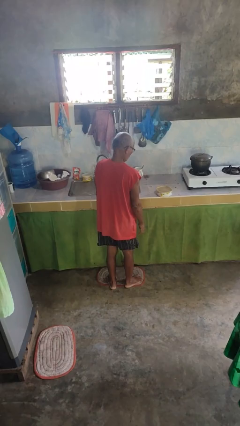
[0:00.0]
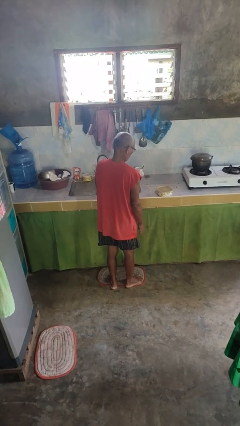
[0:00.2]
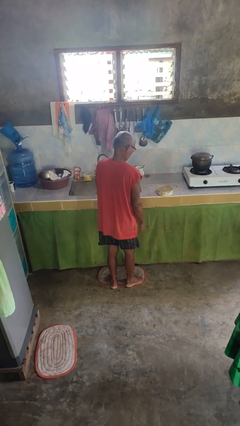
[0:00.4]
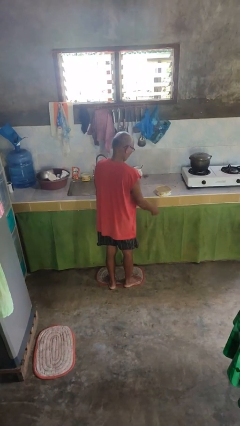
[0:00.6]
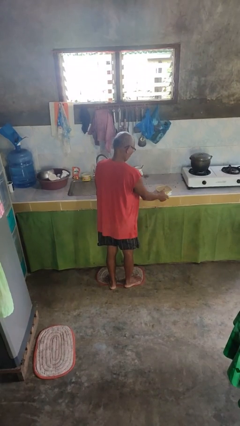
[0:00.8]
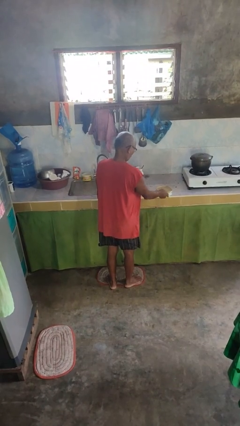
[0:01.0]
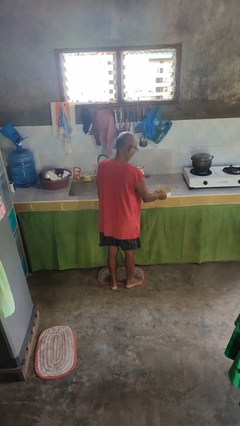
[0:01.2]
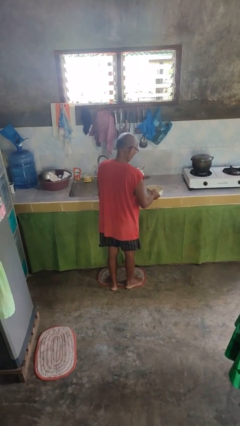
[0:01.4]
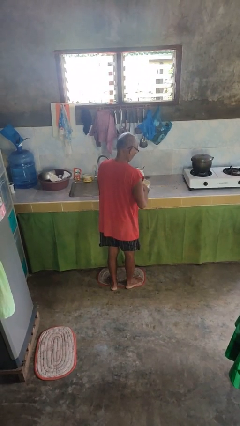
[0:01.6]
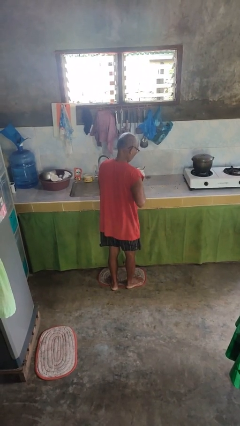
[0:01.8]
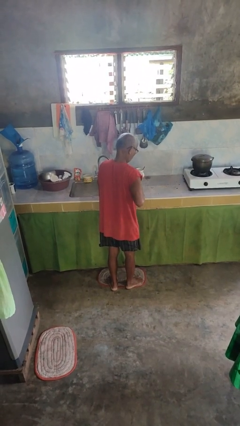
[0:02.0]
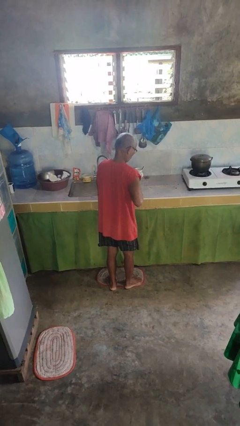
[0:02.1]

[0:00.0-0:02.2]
person picks up object from countertop

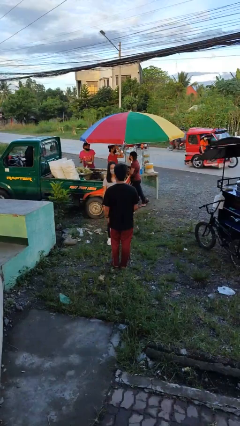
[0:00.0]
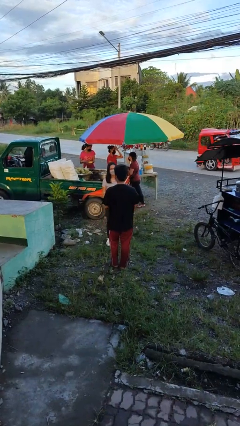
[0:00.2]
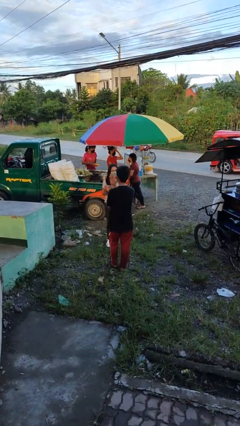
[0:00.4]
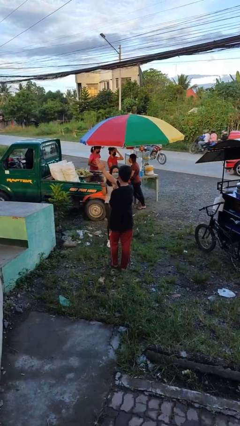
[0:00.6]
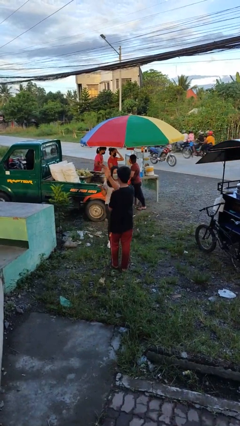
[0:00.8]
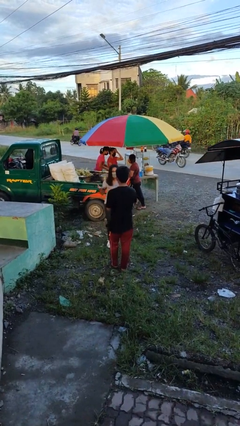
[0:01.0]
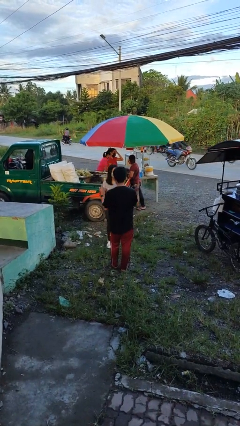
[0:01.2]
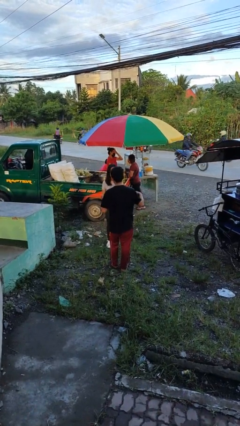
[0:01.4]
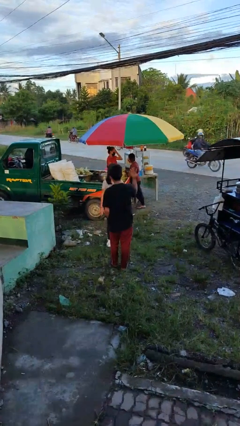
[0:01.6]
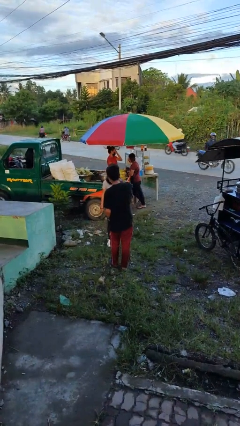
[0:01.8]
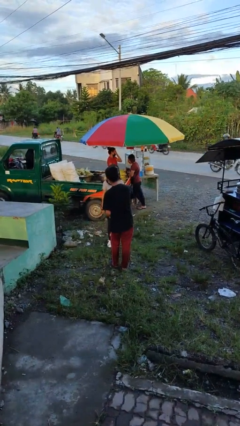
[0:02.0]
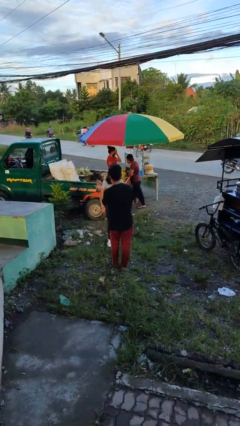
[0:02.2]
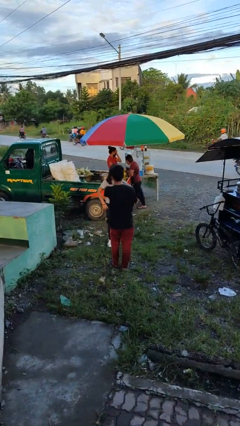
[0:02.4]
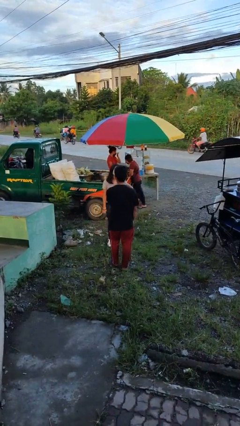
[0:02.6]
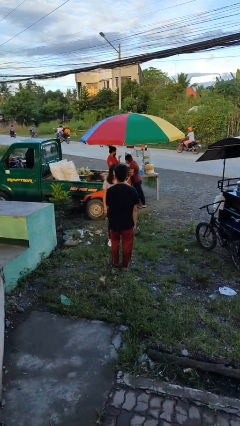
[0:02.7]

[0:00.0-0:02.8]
person talks to person

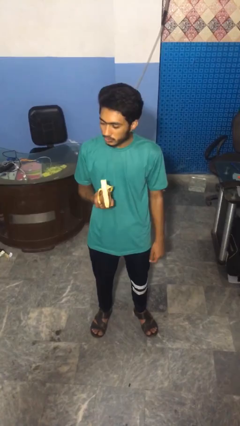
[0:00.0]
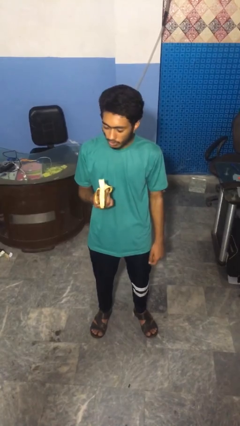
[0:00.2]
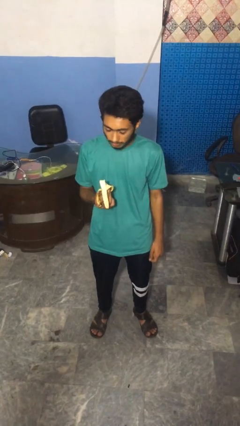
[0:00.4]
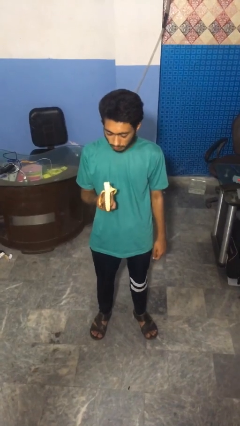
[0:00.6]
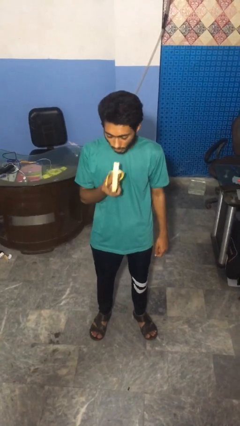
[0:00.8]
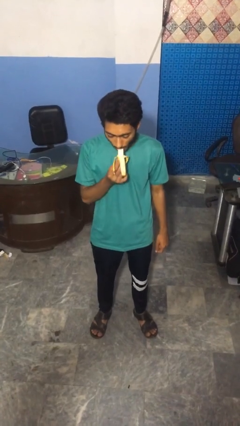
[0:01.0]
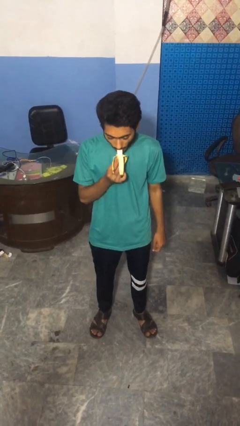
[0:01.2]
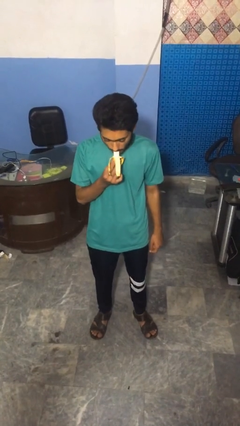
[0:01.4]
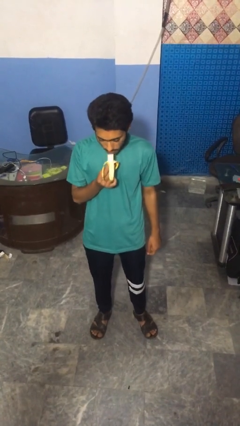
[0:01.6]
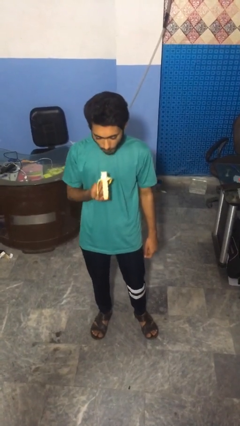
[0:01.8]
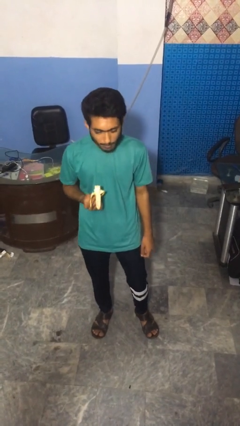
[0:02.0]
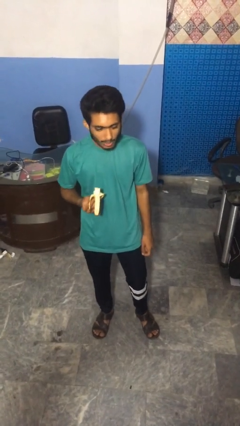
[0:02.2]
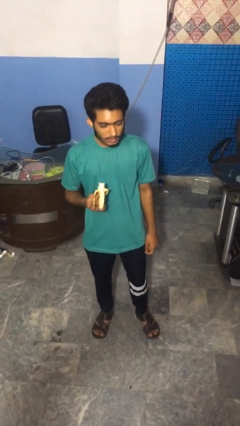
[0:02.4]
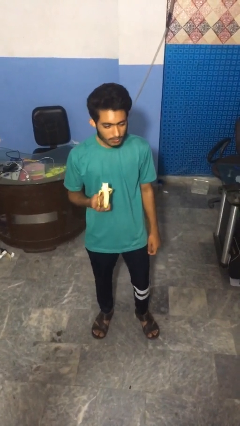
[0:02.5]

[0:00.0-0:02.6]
person eats banana

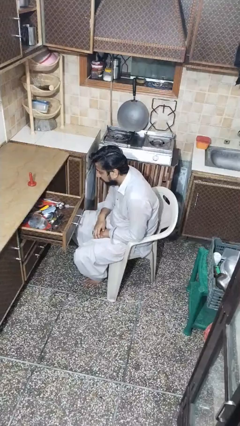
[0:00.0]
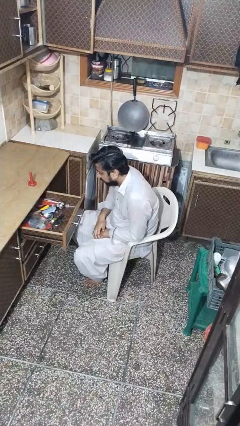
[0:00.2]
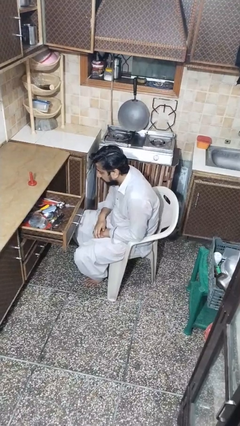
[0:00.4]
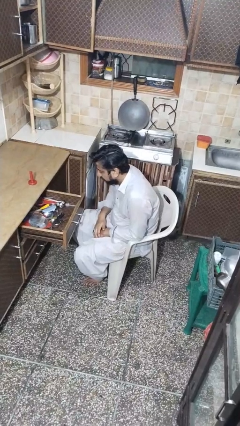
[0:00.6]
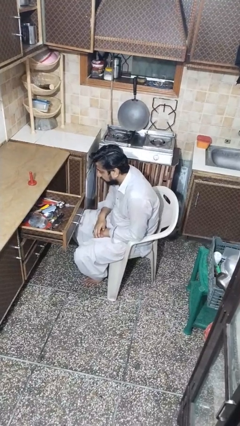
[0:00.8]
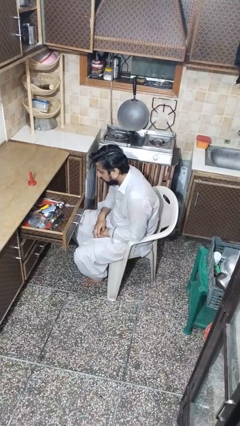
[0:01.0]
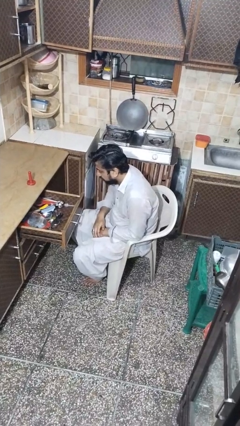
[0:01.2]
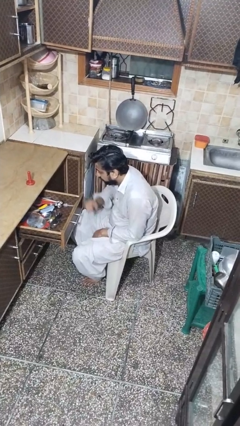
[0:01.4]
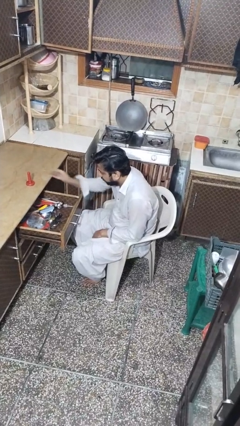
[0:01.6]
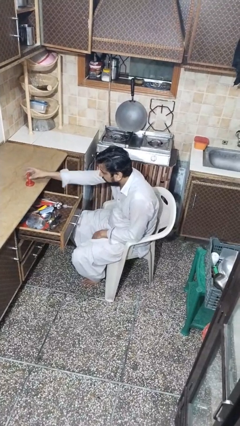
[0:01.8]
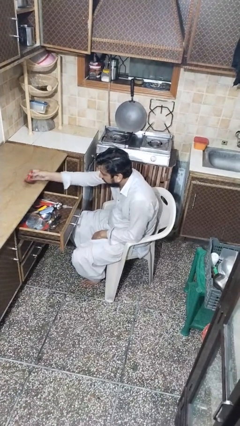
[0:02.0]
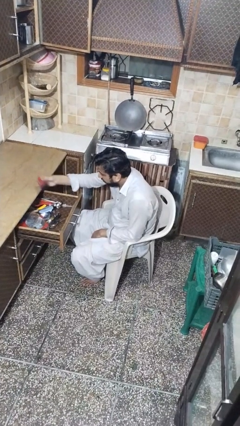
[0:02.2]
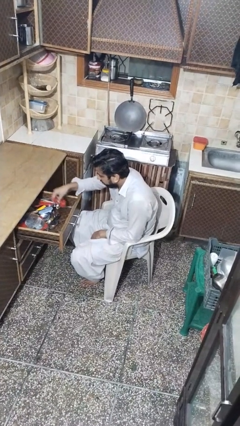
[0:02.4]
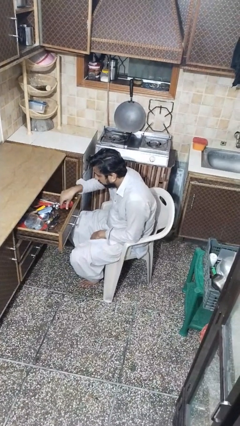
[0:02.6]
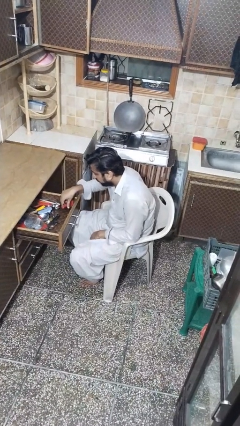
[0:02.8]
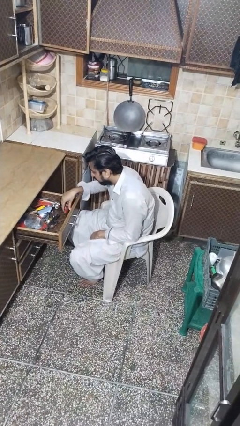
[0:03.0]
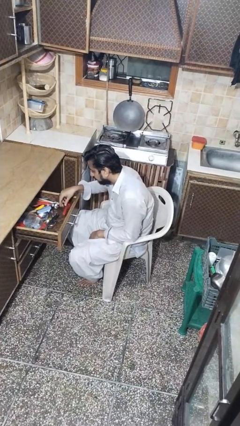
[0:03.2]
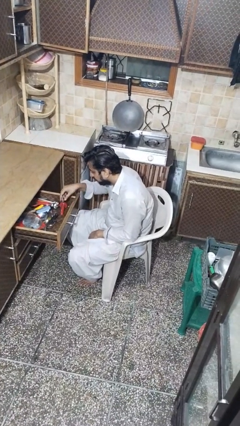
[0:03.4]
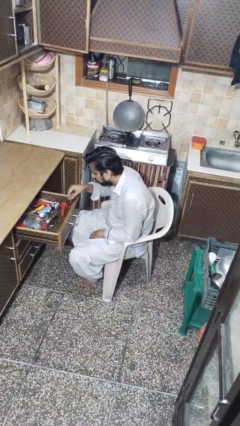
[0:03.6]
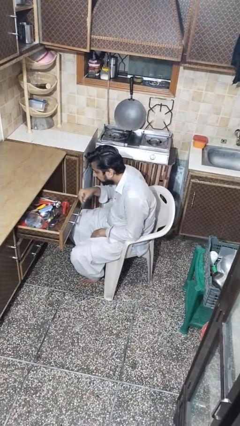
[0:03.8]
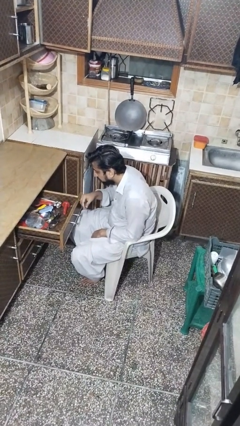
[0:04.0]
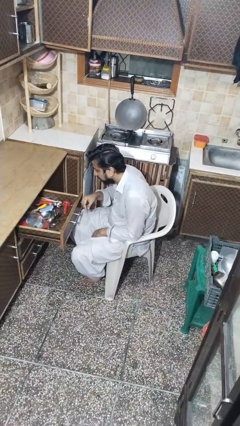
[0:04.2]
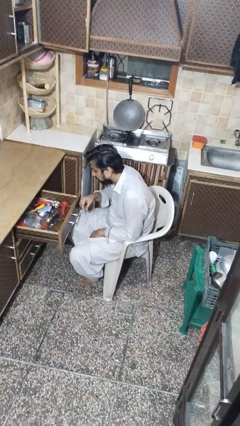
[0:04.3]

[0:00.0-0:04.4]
person puts object into kitchen drawer

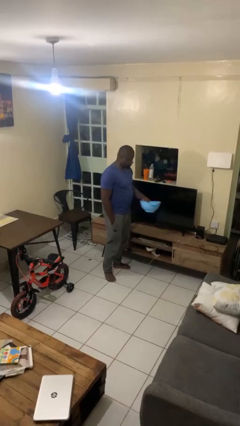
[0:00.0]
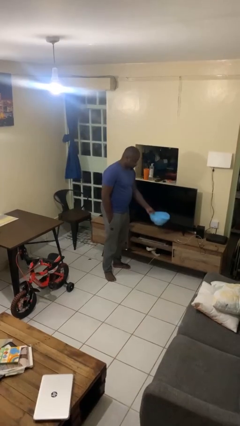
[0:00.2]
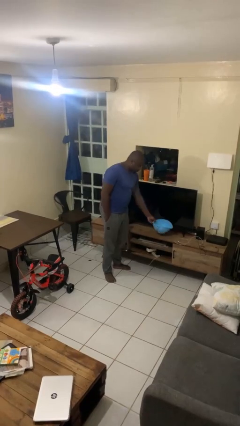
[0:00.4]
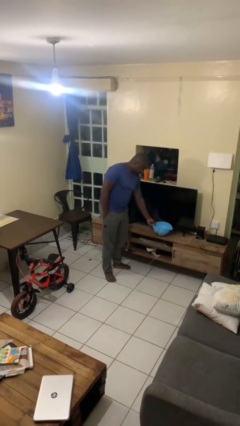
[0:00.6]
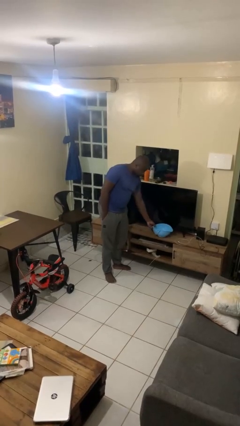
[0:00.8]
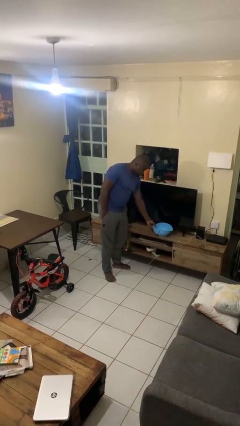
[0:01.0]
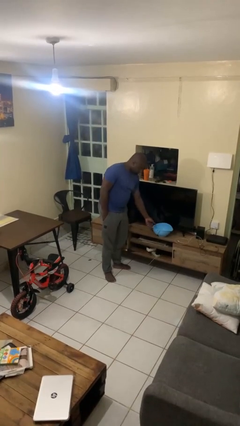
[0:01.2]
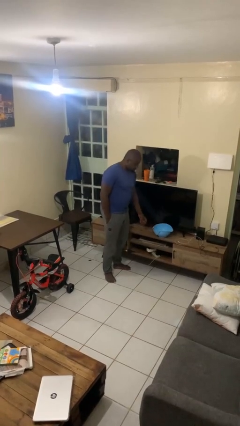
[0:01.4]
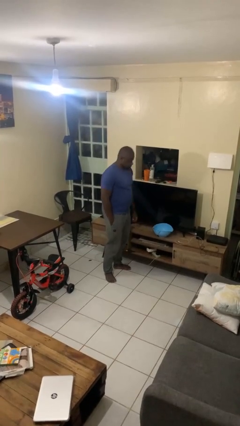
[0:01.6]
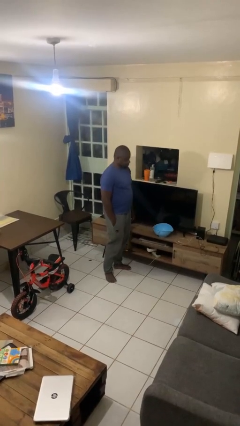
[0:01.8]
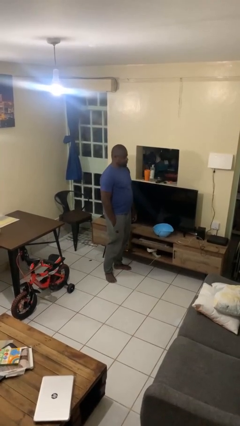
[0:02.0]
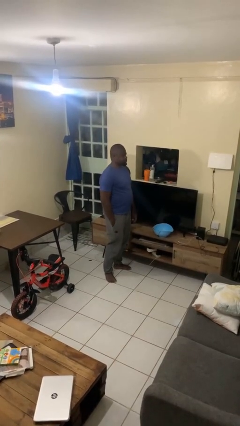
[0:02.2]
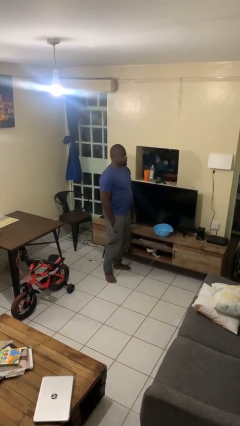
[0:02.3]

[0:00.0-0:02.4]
person puts down object on countertop

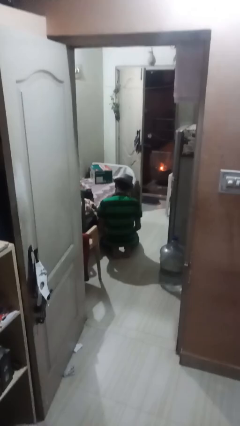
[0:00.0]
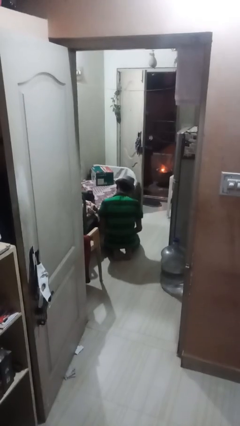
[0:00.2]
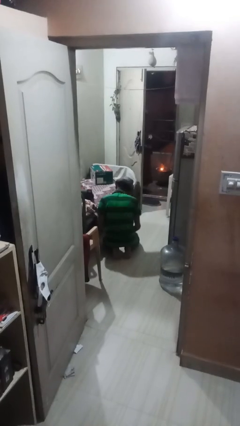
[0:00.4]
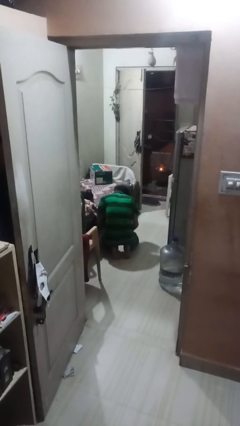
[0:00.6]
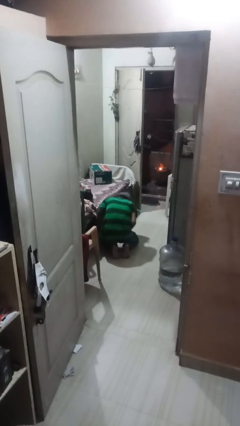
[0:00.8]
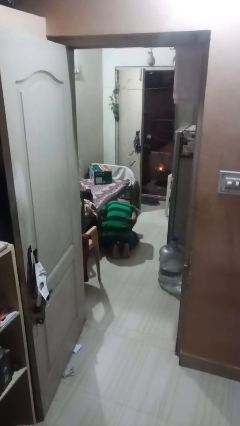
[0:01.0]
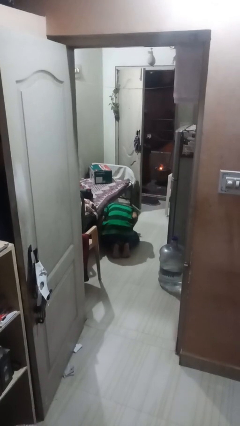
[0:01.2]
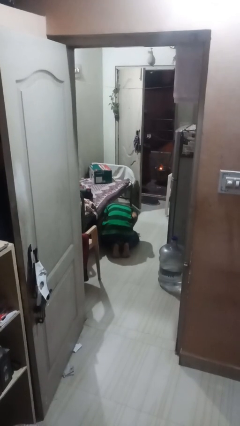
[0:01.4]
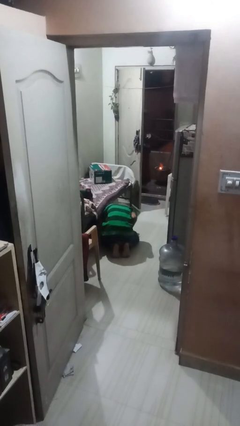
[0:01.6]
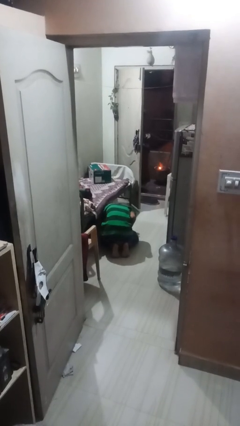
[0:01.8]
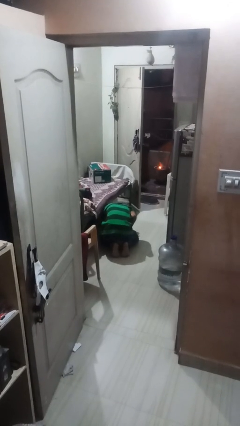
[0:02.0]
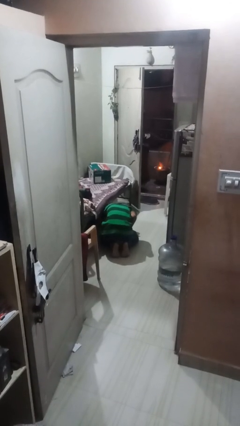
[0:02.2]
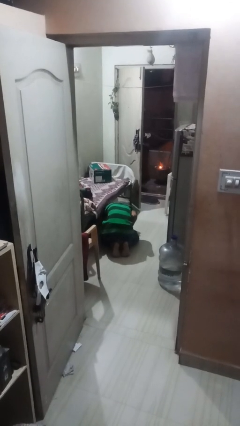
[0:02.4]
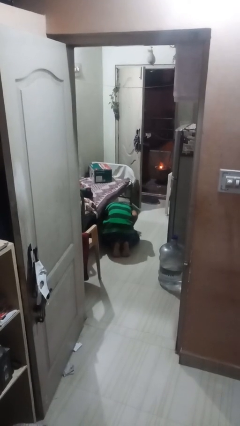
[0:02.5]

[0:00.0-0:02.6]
person searches under bed

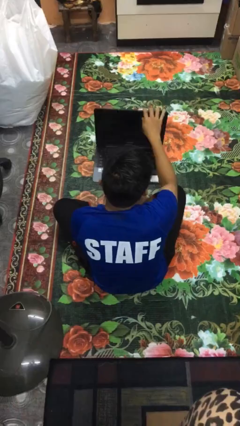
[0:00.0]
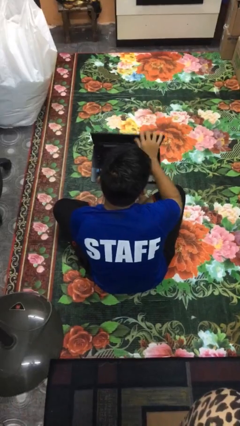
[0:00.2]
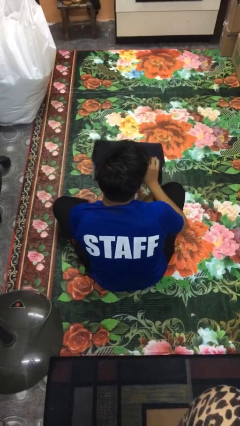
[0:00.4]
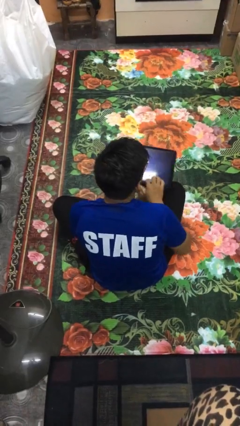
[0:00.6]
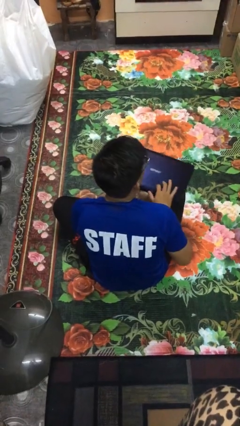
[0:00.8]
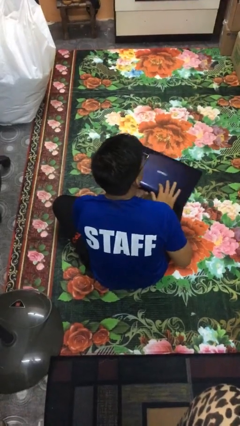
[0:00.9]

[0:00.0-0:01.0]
person closes laptop
